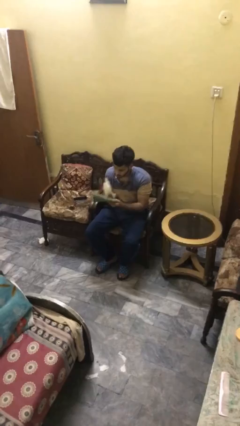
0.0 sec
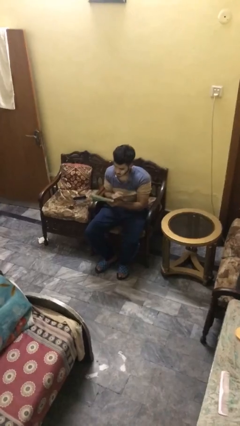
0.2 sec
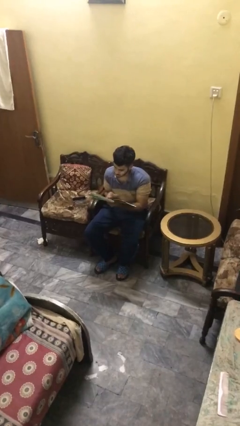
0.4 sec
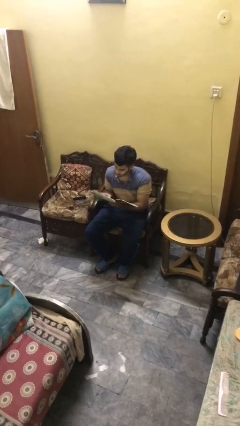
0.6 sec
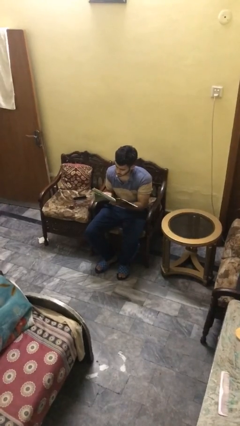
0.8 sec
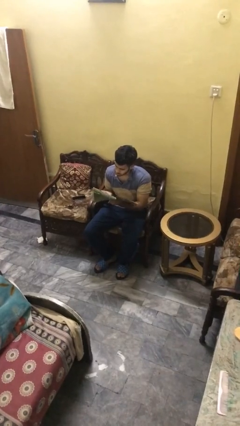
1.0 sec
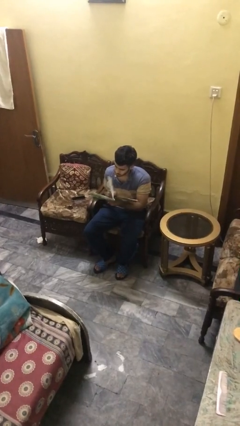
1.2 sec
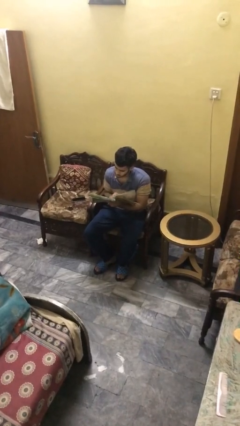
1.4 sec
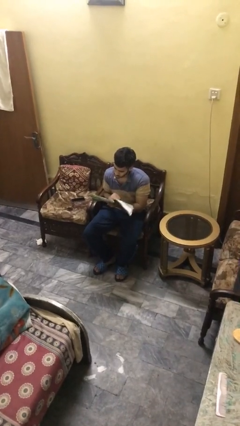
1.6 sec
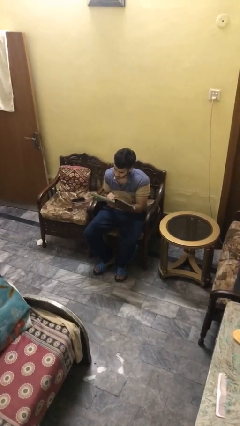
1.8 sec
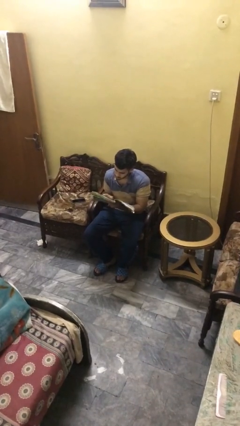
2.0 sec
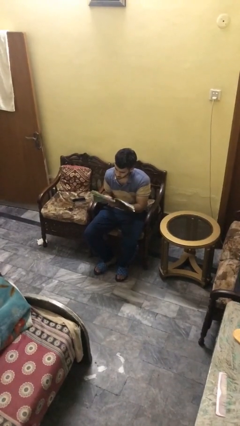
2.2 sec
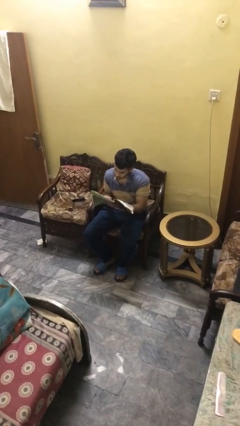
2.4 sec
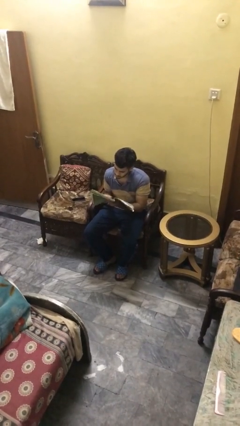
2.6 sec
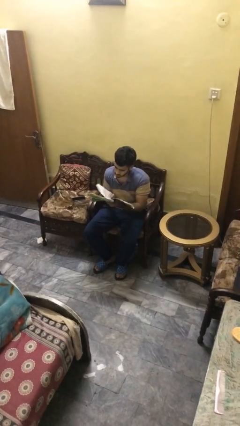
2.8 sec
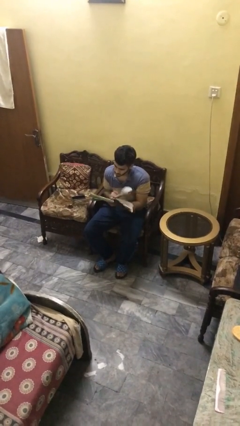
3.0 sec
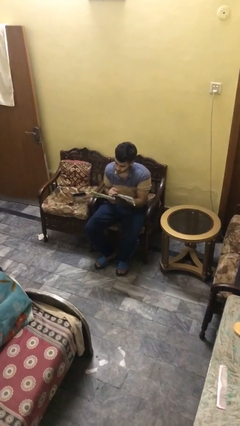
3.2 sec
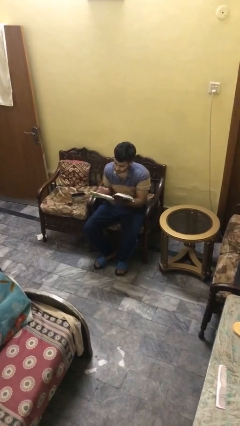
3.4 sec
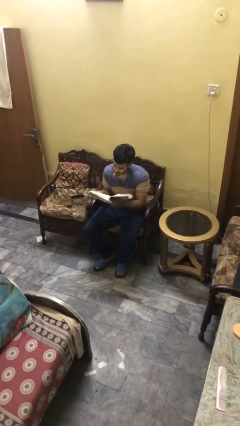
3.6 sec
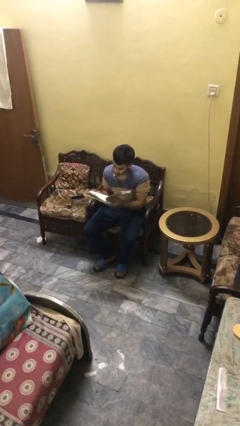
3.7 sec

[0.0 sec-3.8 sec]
person reads document

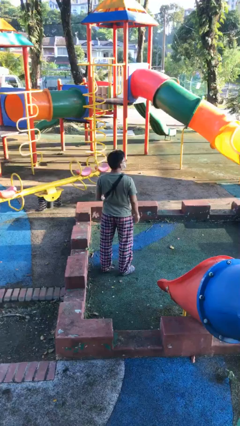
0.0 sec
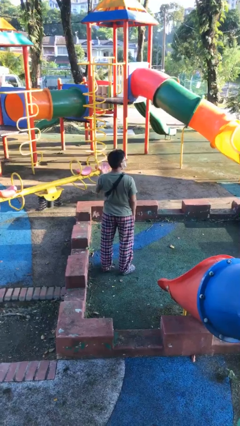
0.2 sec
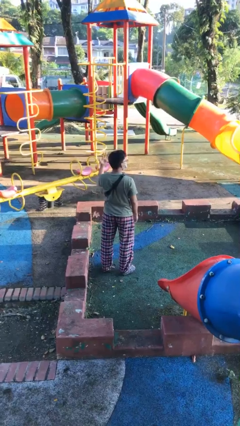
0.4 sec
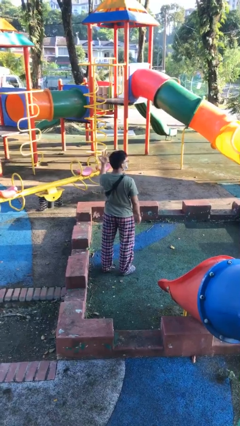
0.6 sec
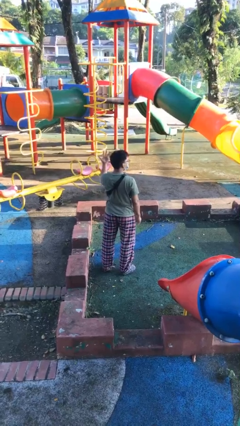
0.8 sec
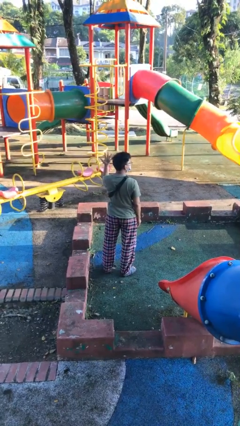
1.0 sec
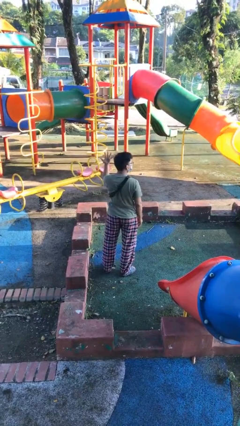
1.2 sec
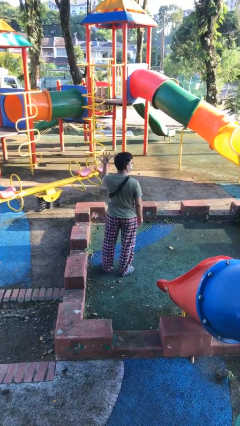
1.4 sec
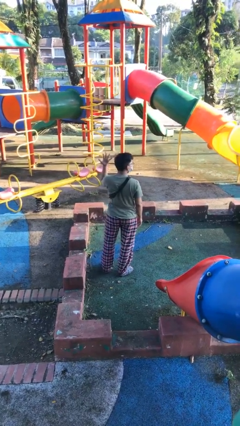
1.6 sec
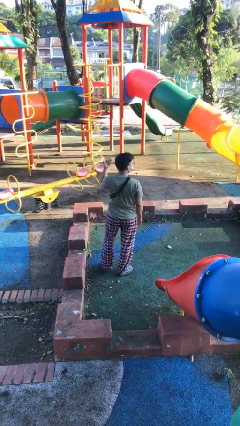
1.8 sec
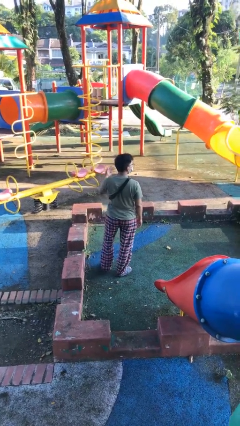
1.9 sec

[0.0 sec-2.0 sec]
person gestures number five

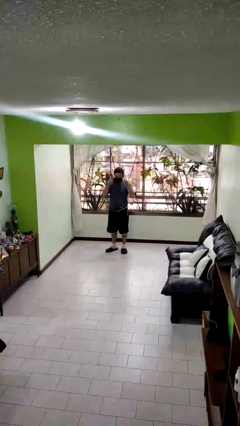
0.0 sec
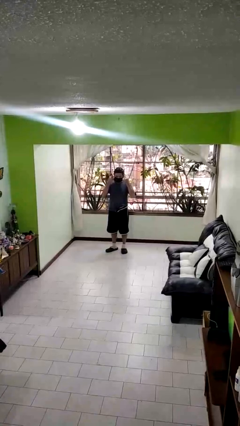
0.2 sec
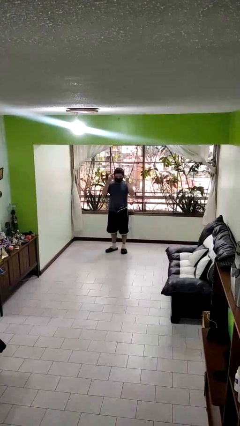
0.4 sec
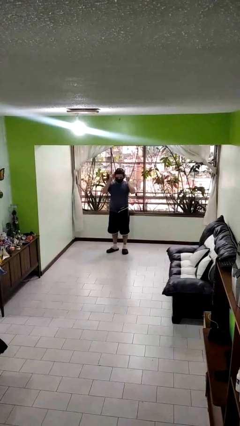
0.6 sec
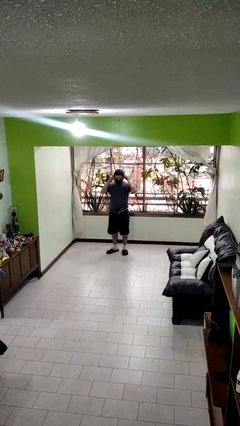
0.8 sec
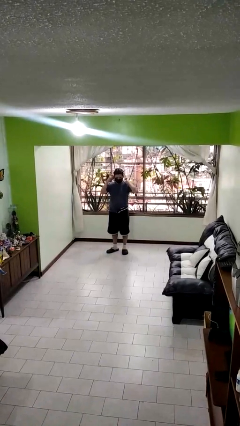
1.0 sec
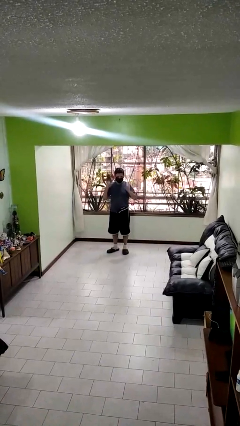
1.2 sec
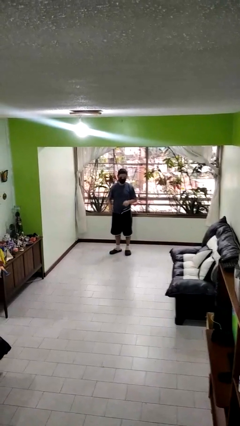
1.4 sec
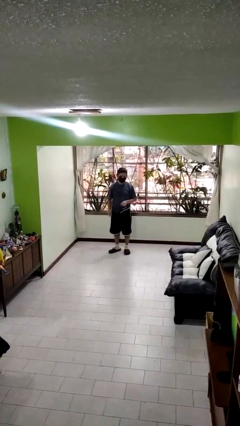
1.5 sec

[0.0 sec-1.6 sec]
person puts on facemask

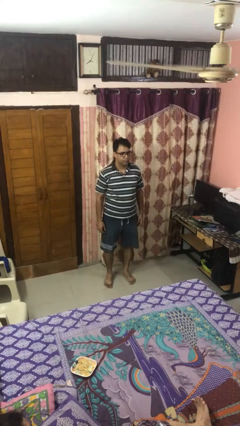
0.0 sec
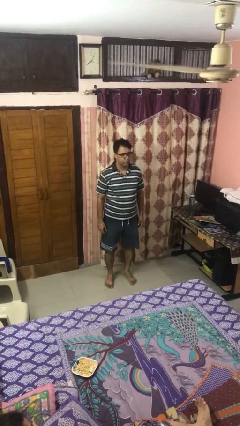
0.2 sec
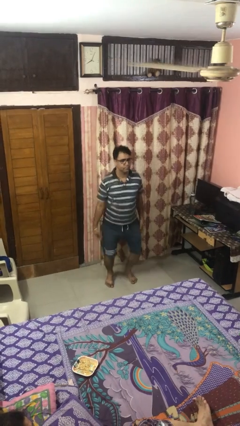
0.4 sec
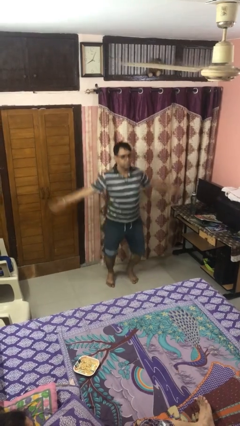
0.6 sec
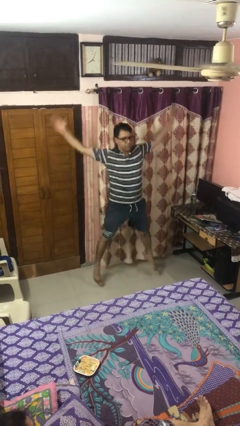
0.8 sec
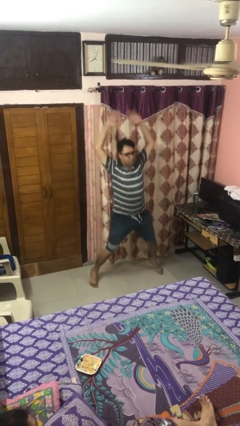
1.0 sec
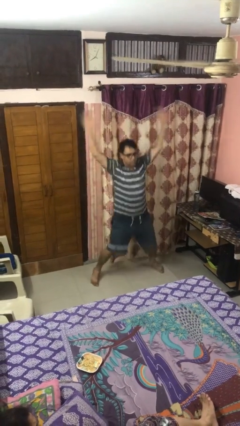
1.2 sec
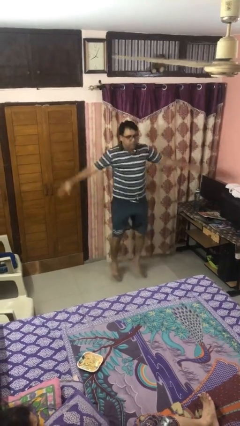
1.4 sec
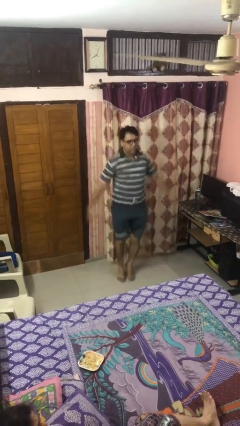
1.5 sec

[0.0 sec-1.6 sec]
person exercises with jumping jacks

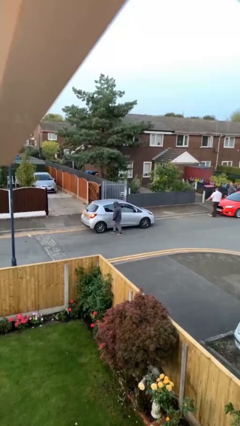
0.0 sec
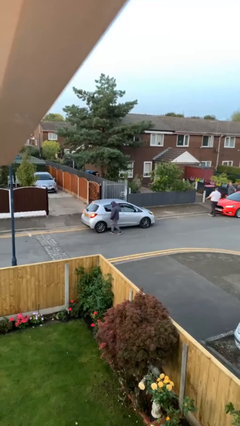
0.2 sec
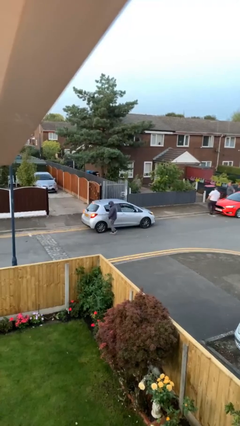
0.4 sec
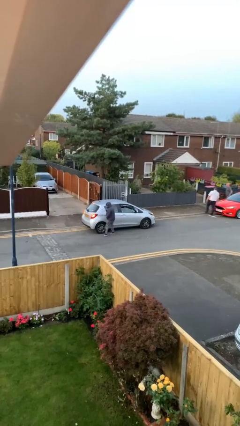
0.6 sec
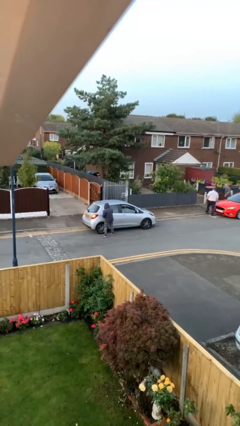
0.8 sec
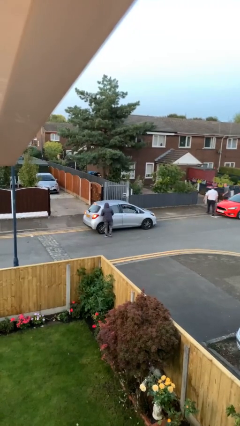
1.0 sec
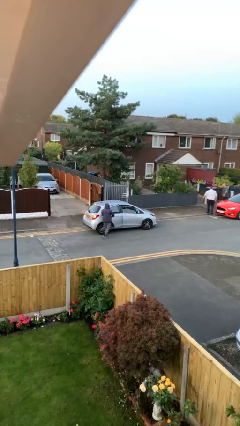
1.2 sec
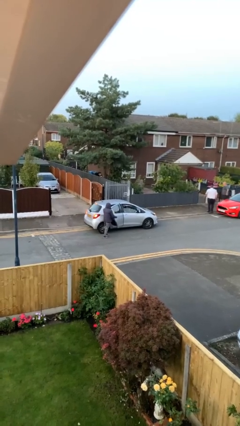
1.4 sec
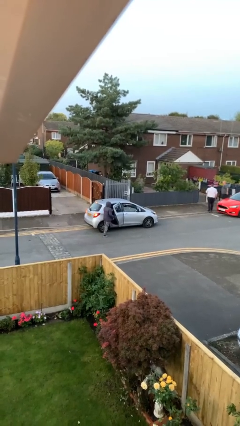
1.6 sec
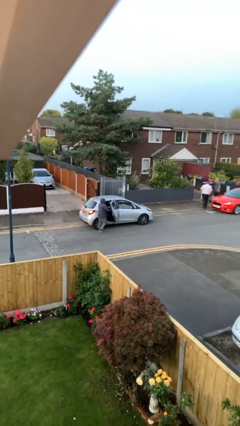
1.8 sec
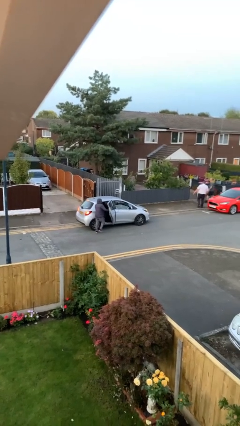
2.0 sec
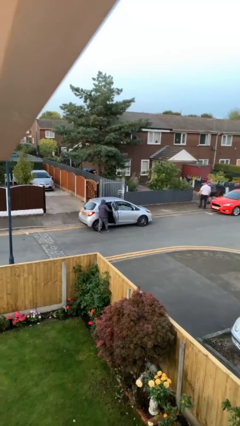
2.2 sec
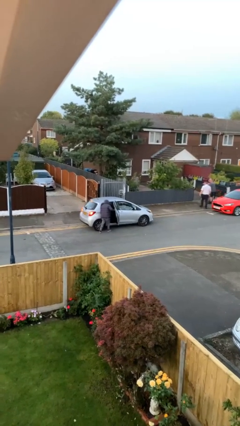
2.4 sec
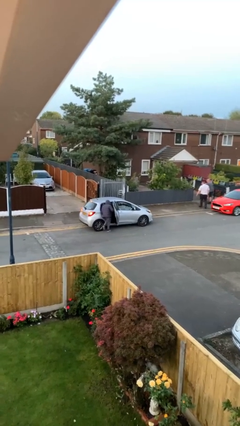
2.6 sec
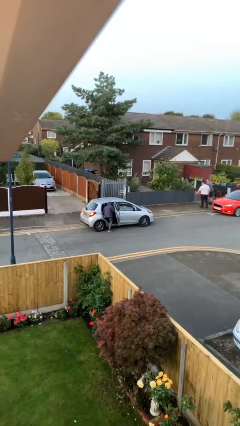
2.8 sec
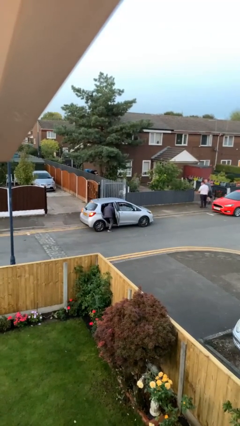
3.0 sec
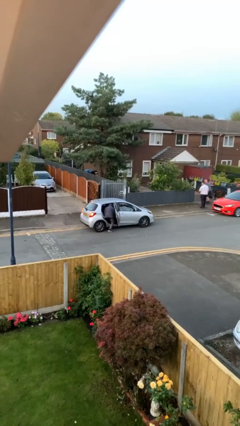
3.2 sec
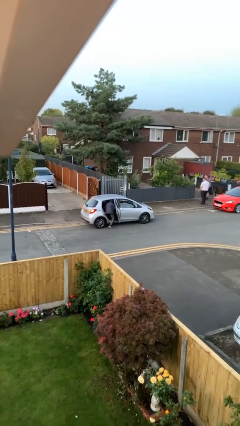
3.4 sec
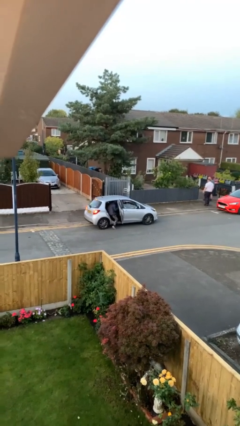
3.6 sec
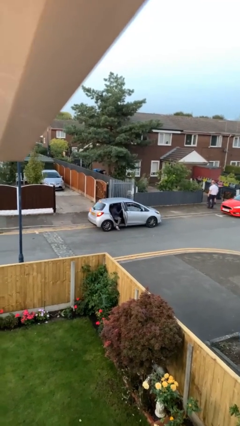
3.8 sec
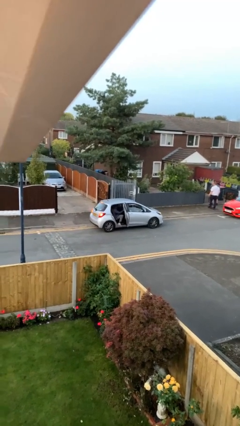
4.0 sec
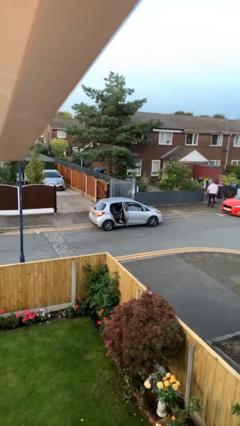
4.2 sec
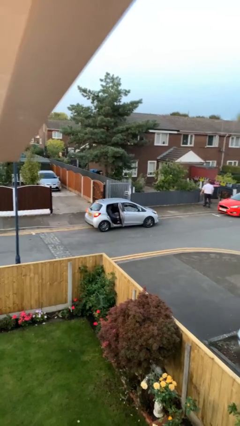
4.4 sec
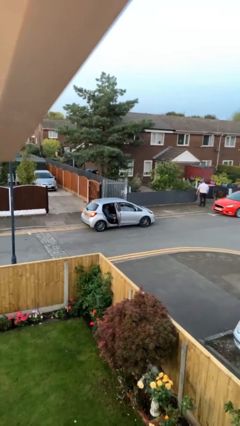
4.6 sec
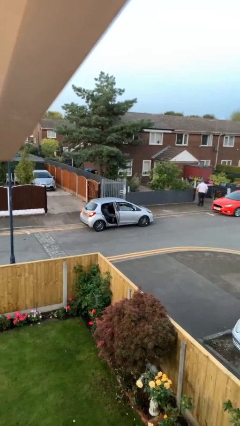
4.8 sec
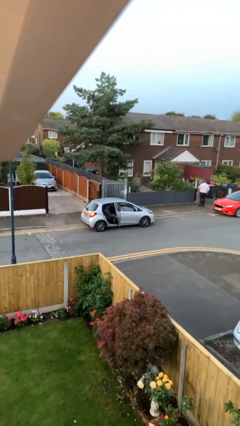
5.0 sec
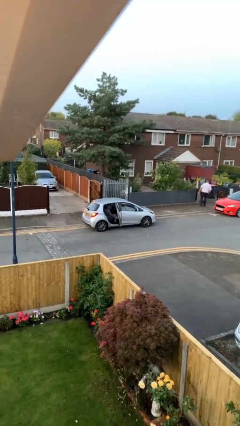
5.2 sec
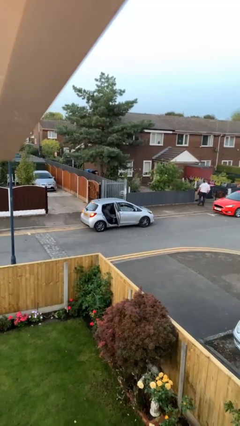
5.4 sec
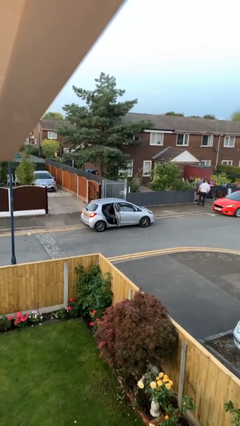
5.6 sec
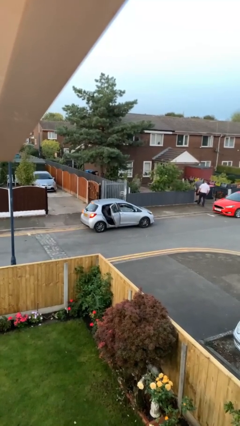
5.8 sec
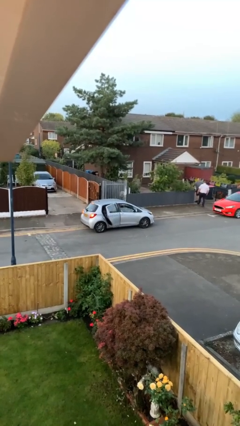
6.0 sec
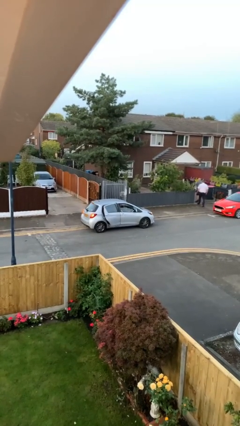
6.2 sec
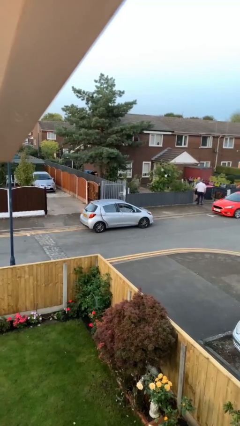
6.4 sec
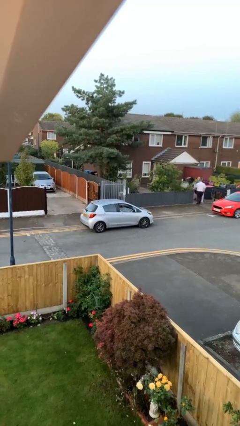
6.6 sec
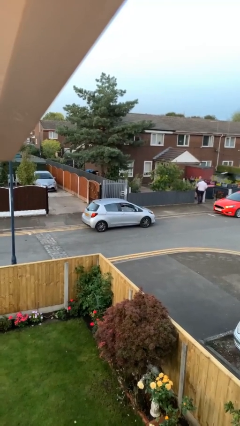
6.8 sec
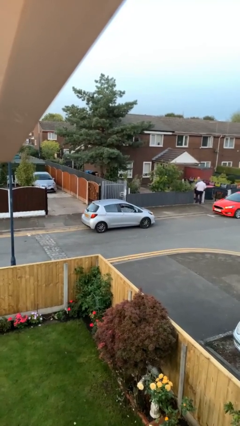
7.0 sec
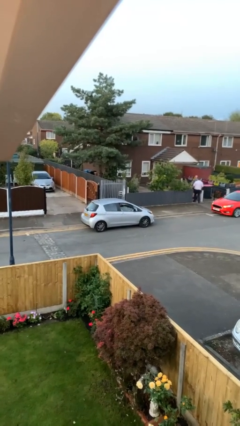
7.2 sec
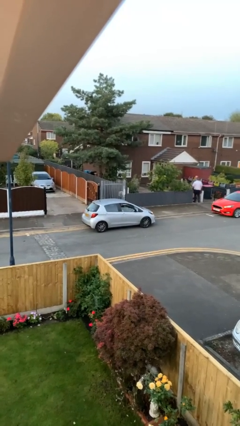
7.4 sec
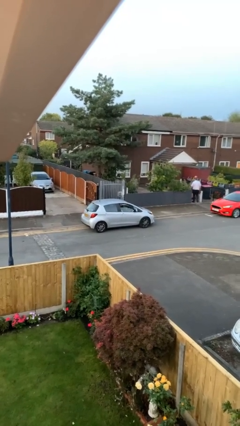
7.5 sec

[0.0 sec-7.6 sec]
car picks up person

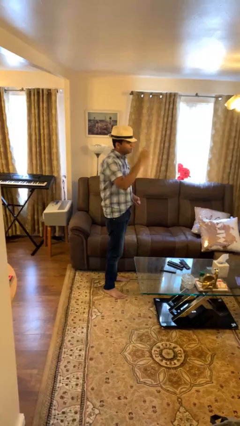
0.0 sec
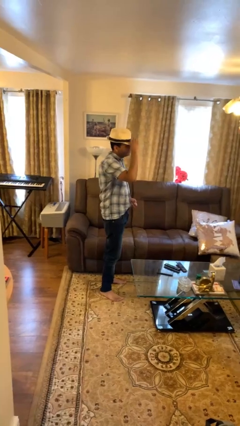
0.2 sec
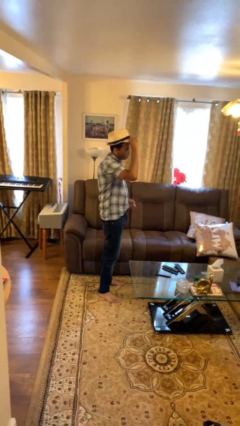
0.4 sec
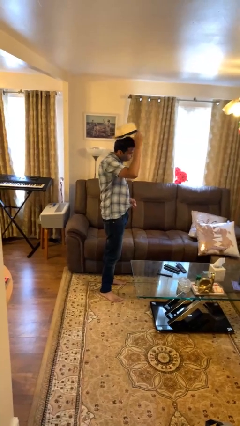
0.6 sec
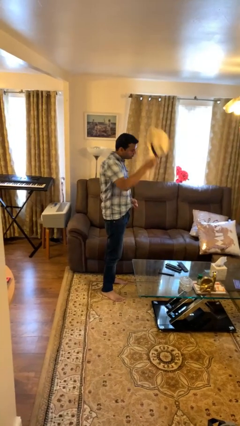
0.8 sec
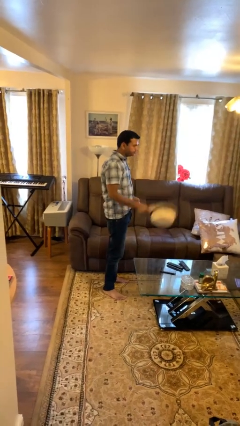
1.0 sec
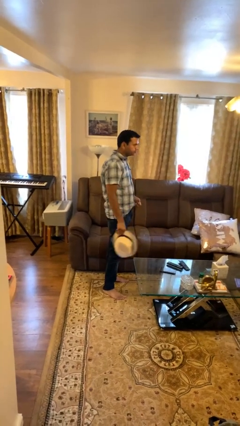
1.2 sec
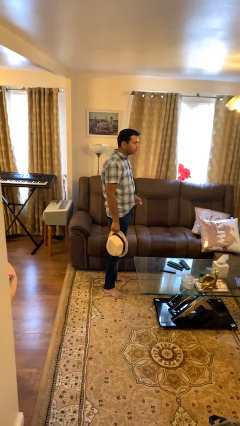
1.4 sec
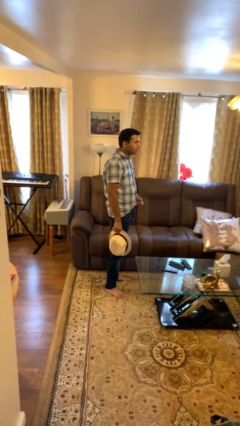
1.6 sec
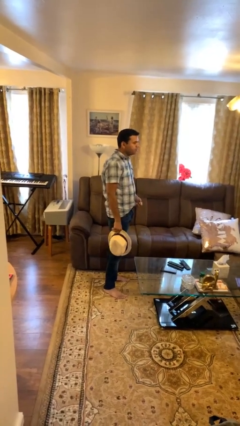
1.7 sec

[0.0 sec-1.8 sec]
person takes off hat
